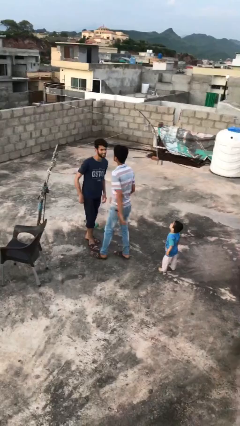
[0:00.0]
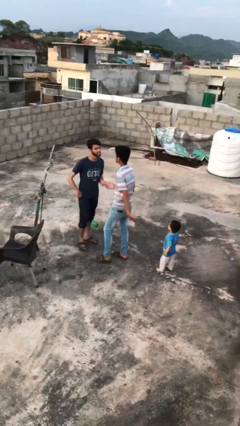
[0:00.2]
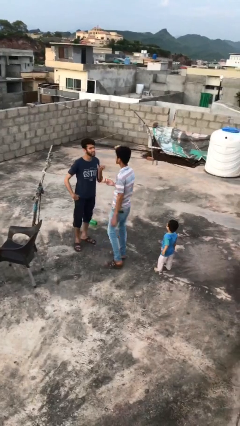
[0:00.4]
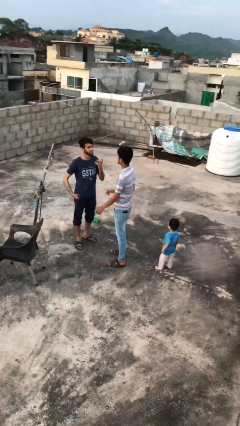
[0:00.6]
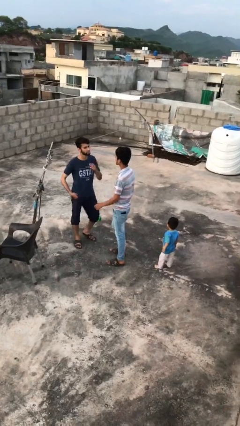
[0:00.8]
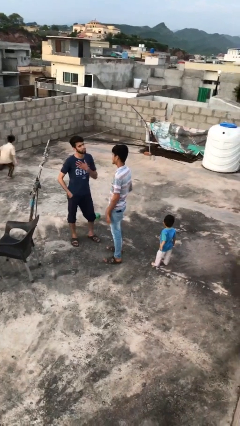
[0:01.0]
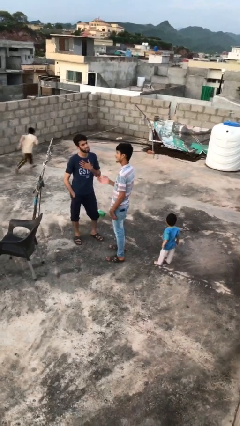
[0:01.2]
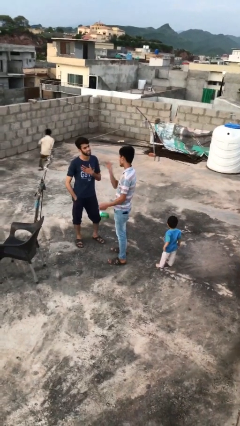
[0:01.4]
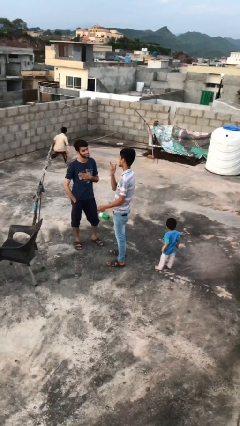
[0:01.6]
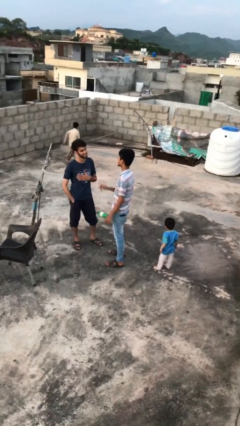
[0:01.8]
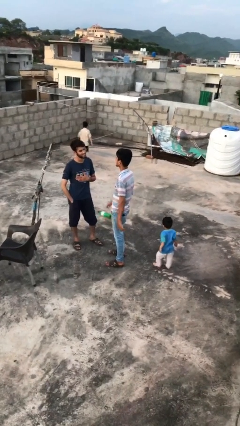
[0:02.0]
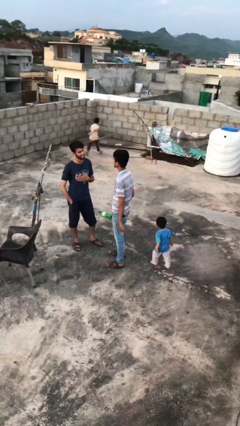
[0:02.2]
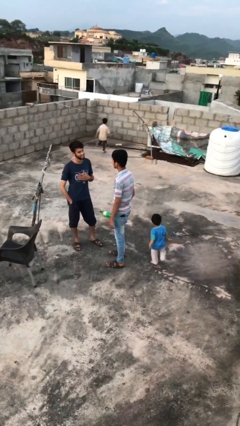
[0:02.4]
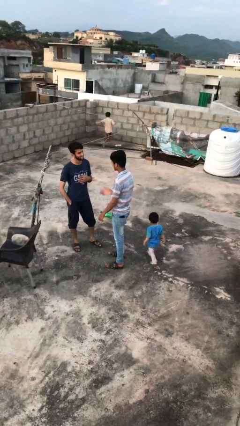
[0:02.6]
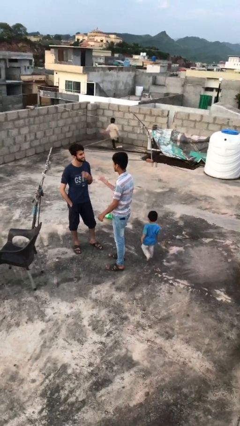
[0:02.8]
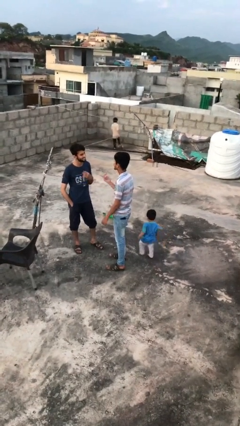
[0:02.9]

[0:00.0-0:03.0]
person talks to person

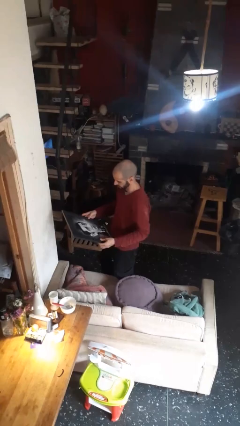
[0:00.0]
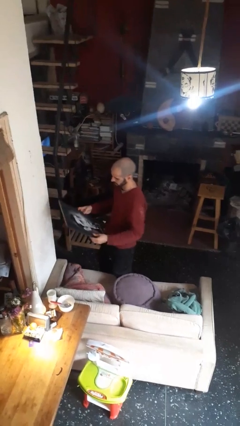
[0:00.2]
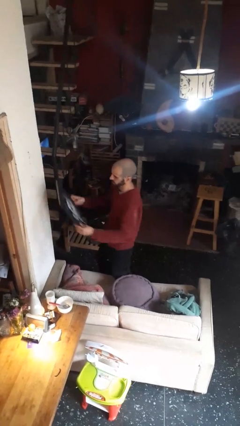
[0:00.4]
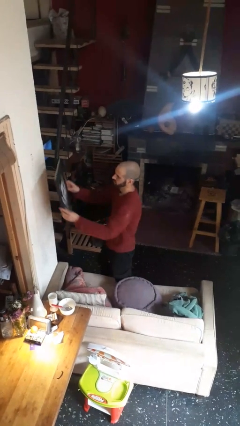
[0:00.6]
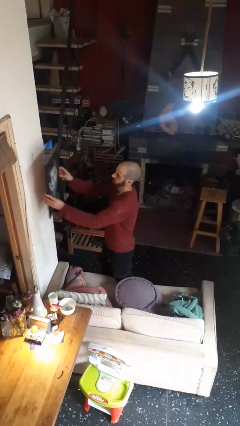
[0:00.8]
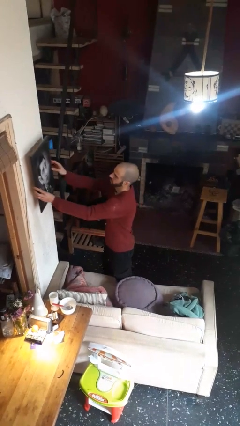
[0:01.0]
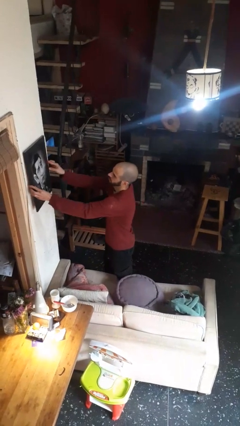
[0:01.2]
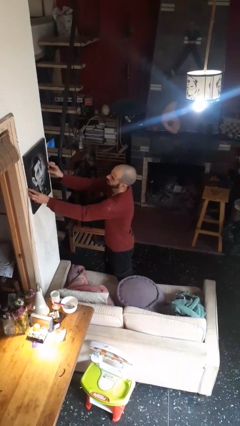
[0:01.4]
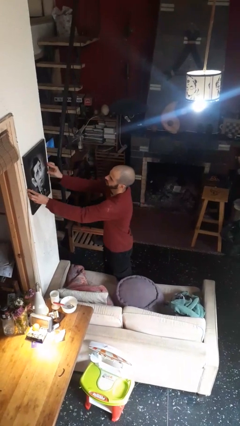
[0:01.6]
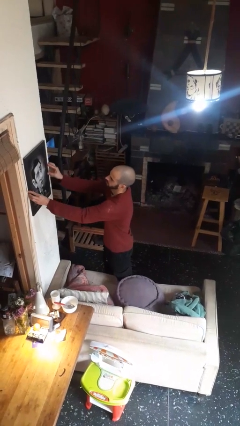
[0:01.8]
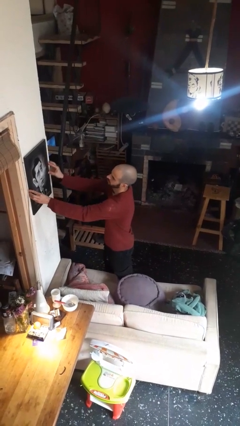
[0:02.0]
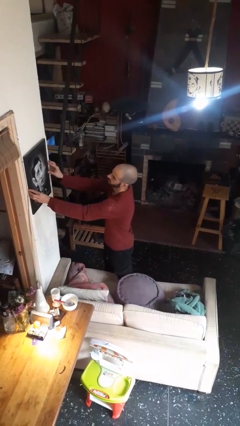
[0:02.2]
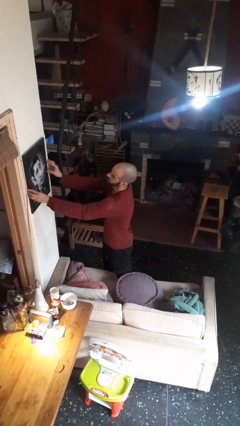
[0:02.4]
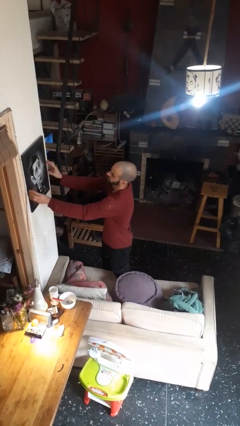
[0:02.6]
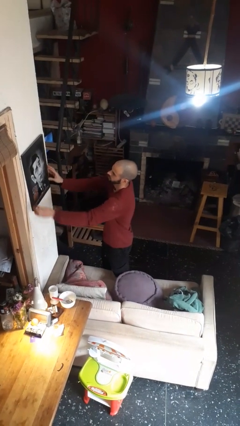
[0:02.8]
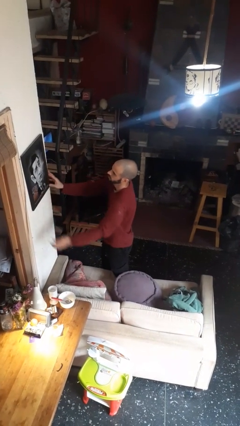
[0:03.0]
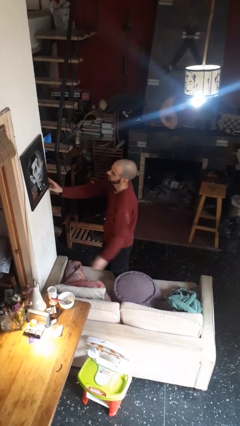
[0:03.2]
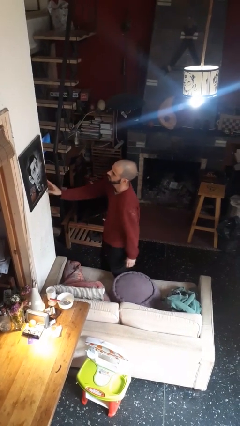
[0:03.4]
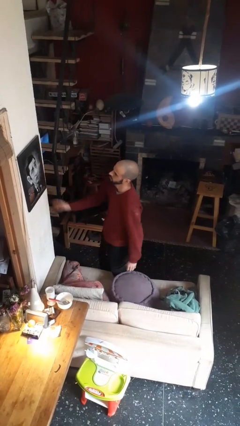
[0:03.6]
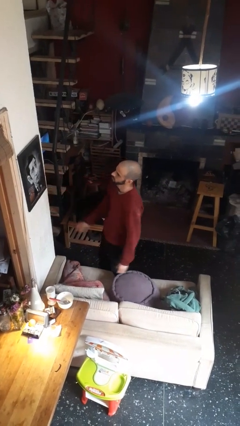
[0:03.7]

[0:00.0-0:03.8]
person puts up picture frame

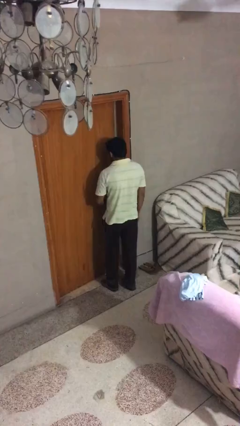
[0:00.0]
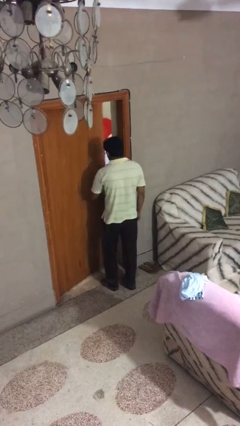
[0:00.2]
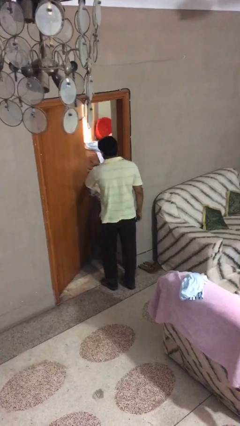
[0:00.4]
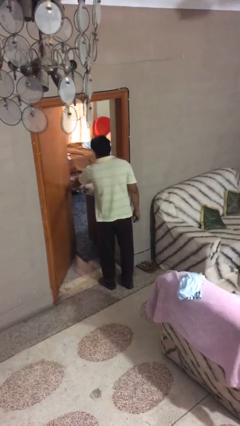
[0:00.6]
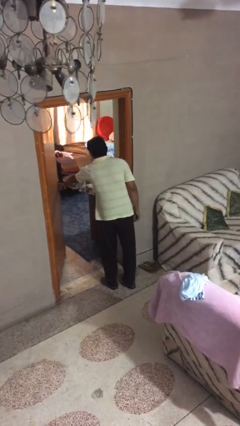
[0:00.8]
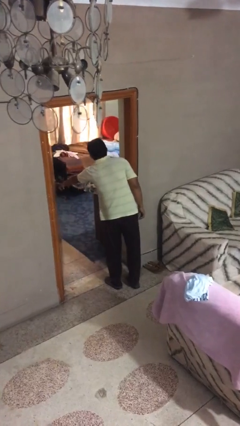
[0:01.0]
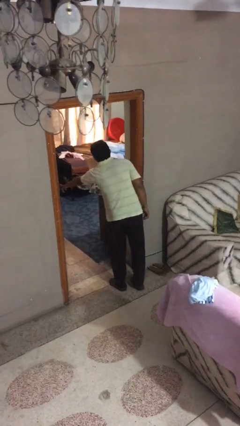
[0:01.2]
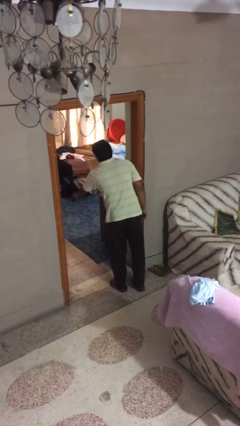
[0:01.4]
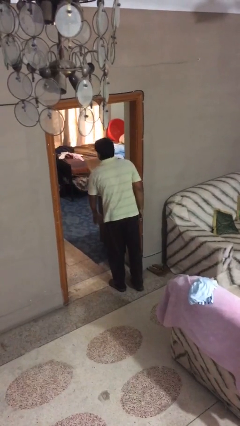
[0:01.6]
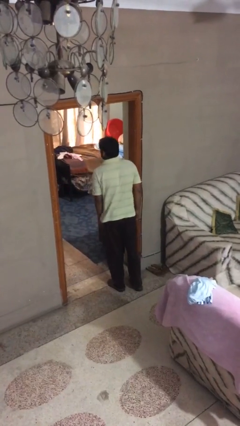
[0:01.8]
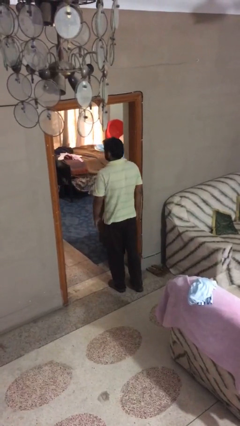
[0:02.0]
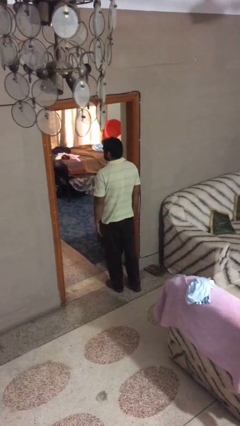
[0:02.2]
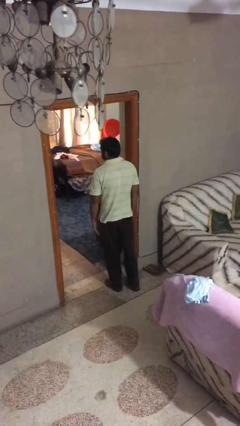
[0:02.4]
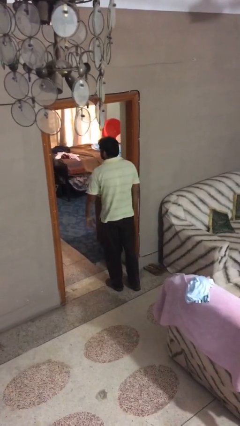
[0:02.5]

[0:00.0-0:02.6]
person opens facility door

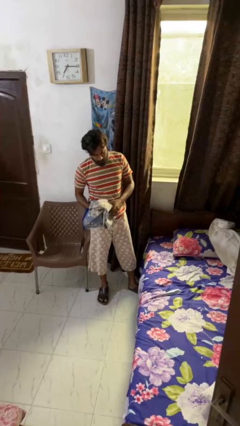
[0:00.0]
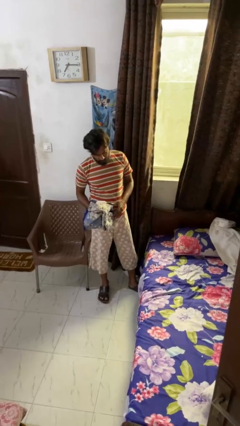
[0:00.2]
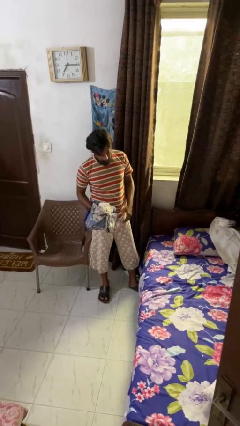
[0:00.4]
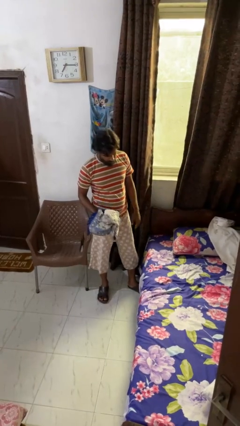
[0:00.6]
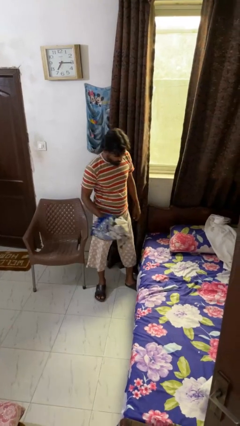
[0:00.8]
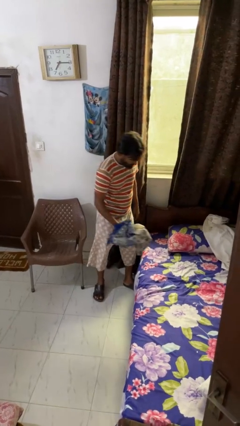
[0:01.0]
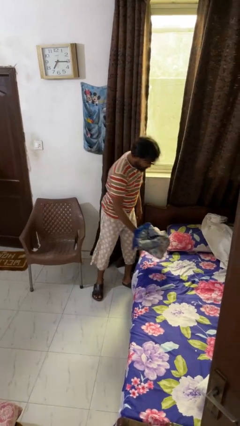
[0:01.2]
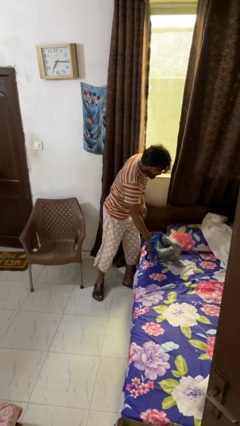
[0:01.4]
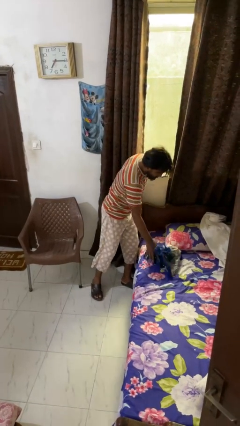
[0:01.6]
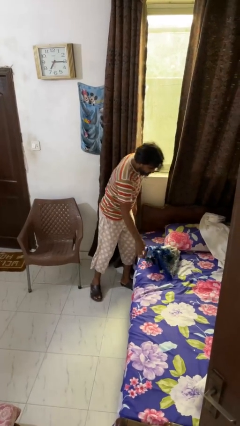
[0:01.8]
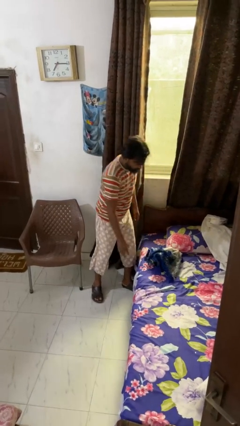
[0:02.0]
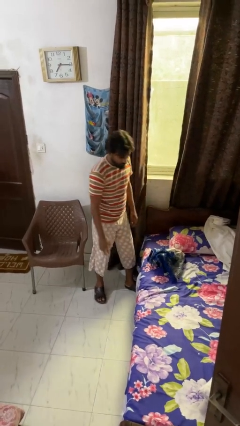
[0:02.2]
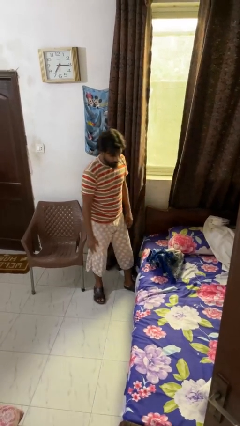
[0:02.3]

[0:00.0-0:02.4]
person puts down object on bed

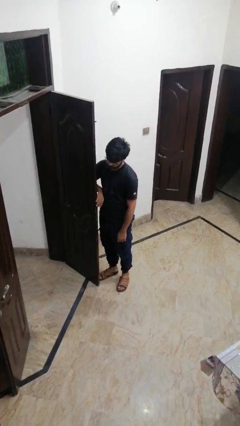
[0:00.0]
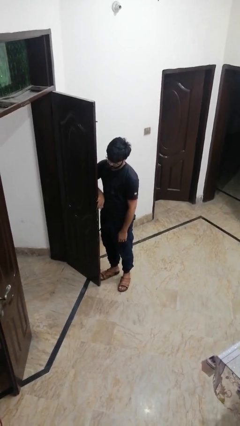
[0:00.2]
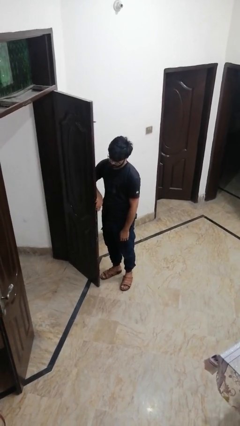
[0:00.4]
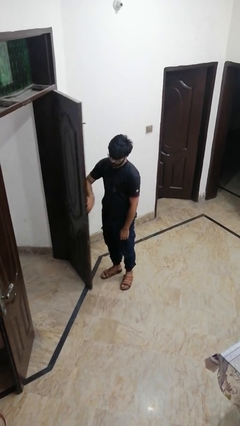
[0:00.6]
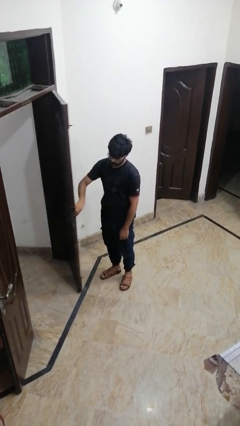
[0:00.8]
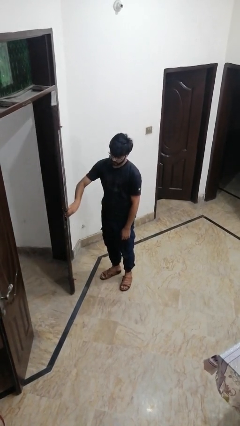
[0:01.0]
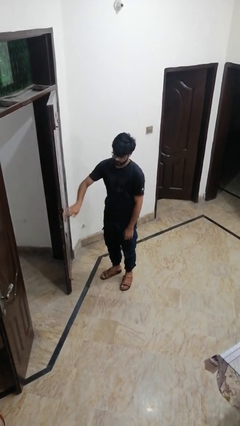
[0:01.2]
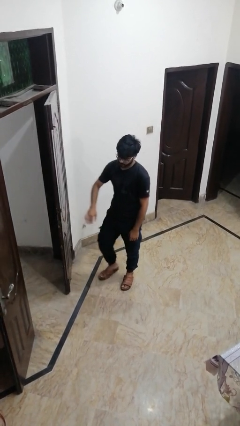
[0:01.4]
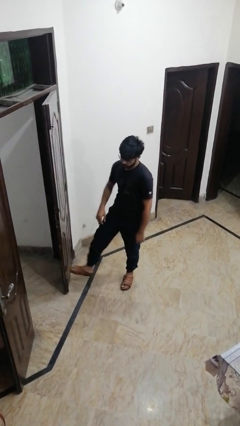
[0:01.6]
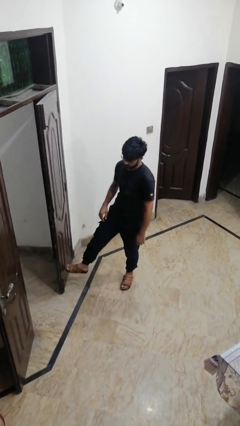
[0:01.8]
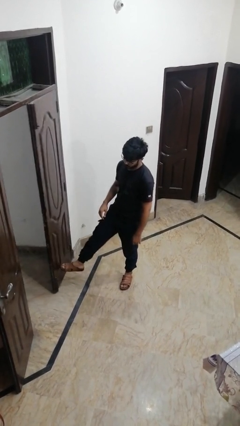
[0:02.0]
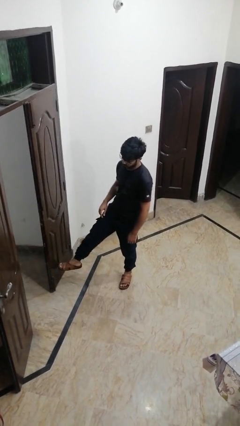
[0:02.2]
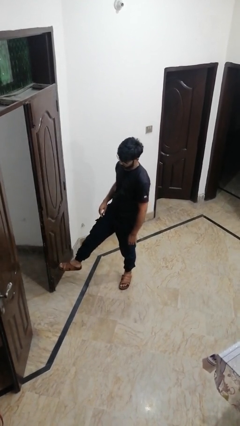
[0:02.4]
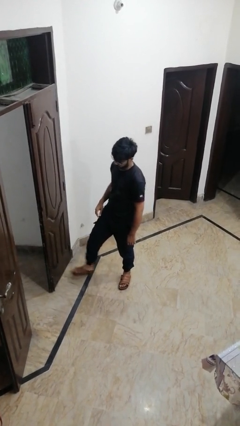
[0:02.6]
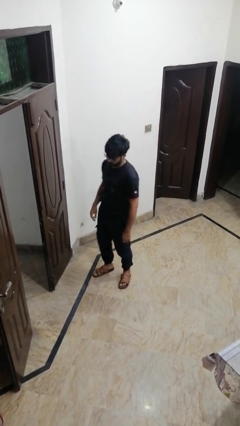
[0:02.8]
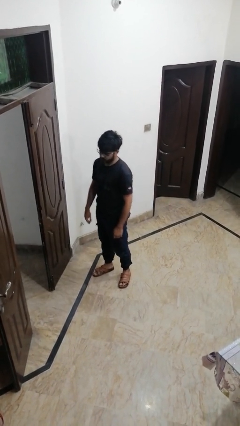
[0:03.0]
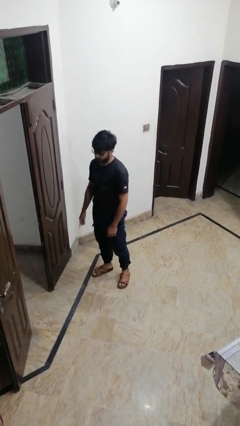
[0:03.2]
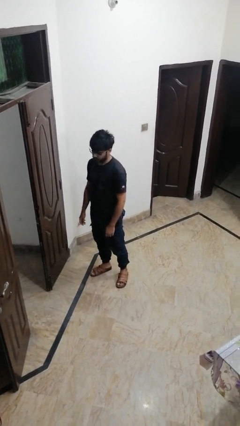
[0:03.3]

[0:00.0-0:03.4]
person closes door with foot

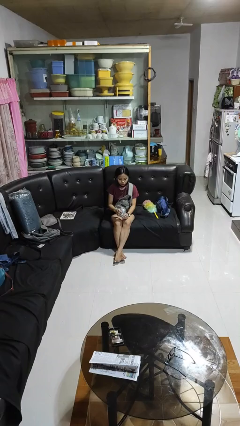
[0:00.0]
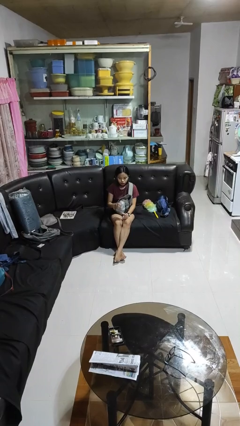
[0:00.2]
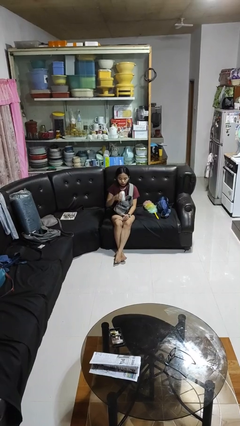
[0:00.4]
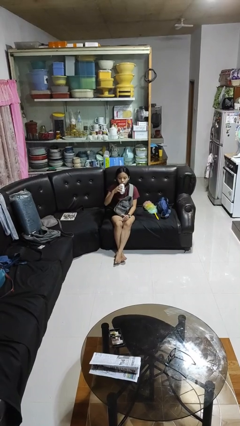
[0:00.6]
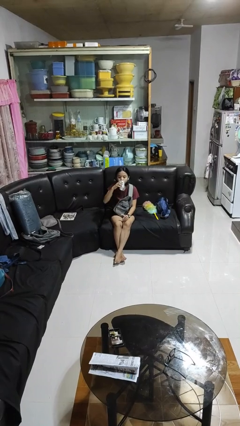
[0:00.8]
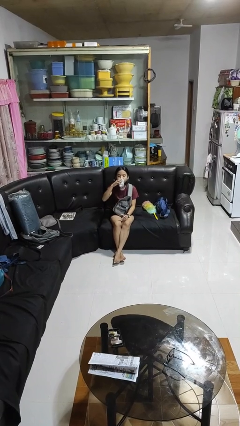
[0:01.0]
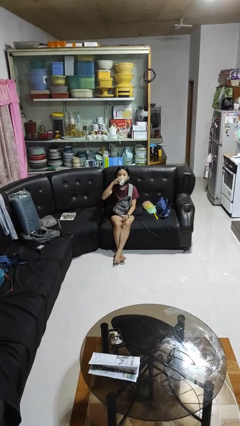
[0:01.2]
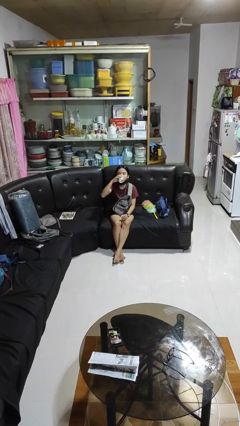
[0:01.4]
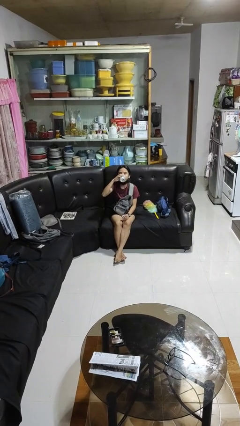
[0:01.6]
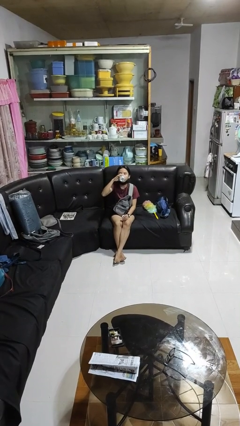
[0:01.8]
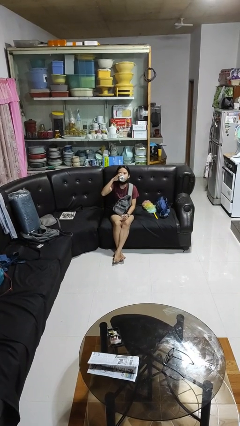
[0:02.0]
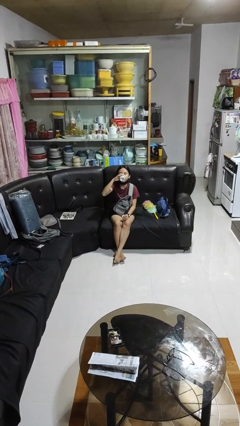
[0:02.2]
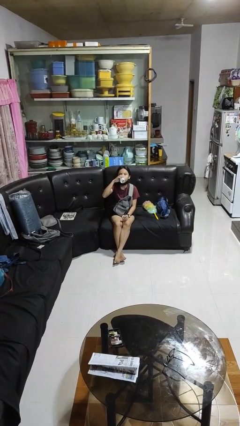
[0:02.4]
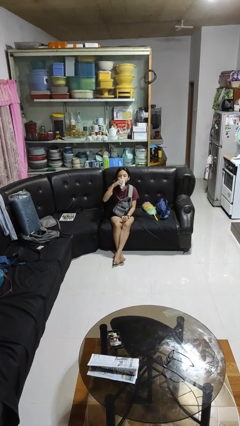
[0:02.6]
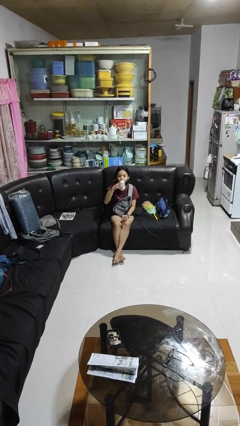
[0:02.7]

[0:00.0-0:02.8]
person drinks from beverage can
